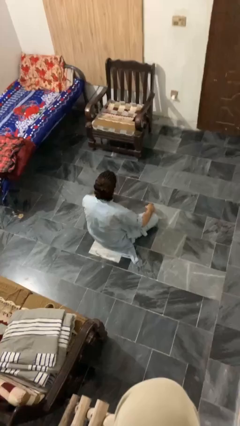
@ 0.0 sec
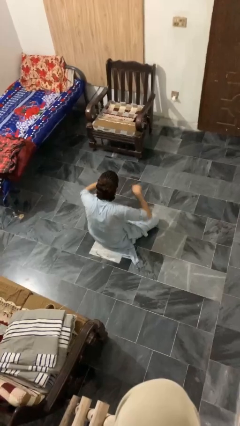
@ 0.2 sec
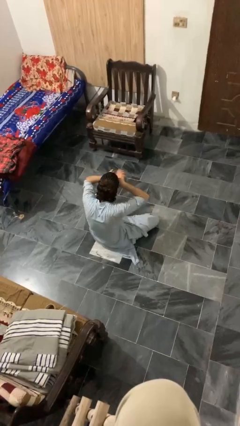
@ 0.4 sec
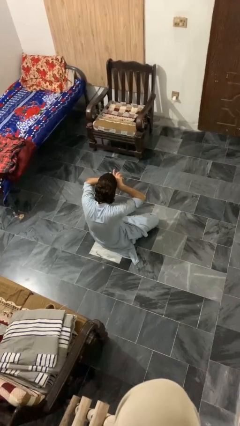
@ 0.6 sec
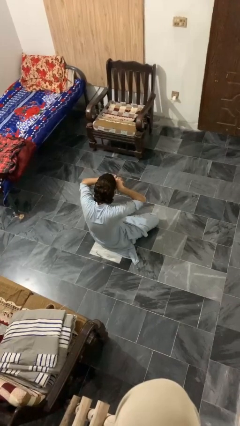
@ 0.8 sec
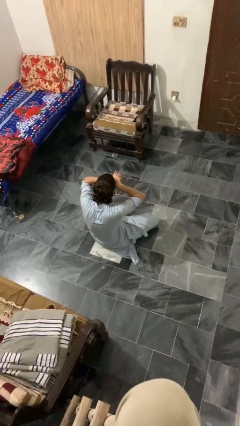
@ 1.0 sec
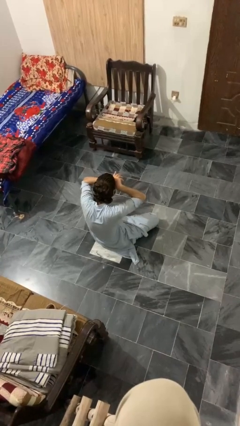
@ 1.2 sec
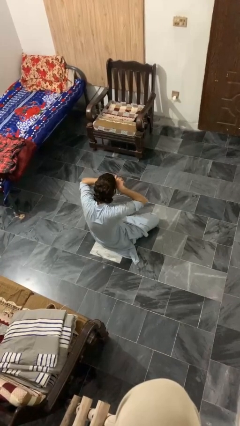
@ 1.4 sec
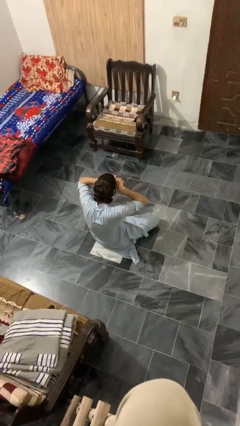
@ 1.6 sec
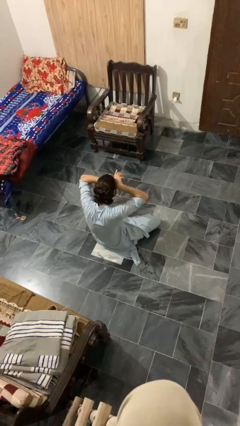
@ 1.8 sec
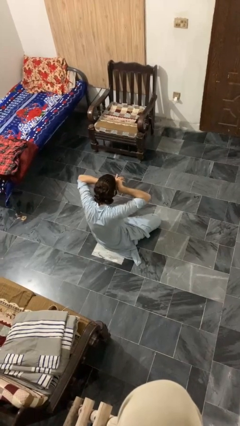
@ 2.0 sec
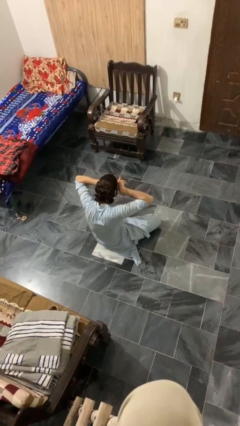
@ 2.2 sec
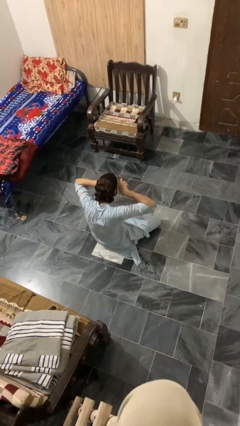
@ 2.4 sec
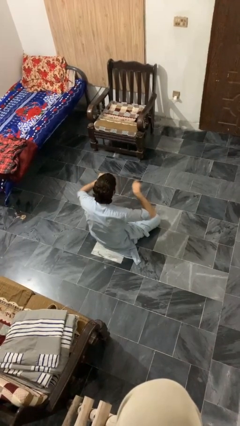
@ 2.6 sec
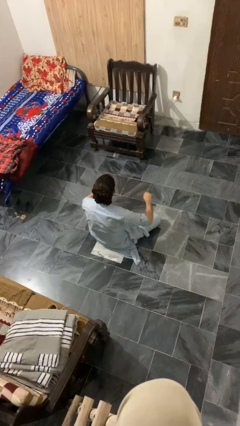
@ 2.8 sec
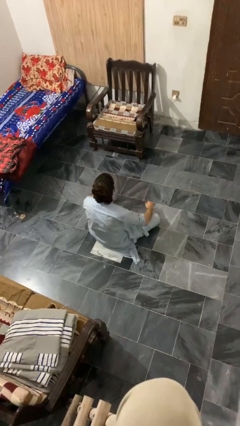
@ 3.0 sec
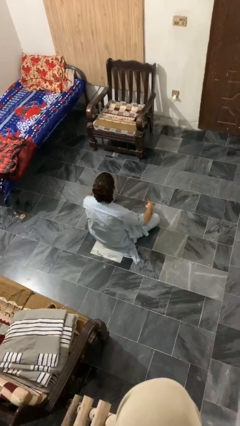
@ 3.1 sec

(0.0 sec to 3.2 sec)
person rubs eyes

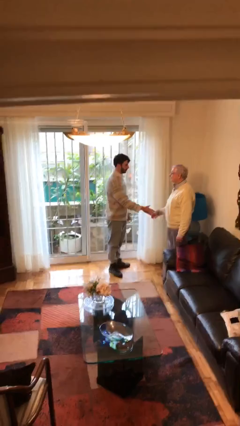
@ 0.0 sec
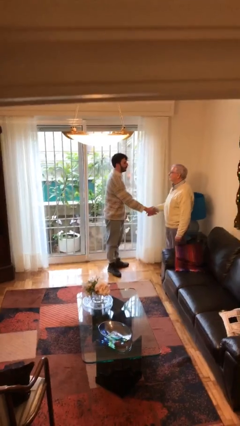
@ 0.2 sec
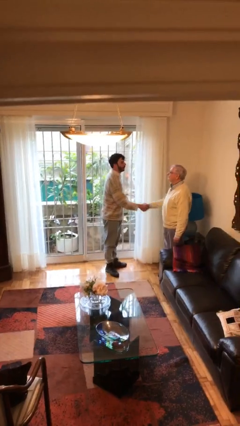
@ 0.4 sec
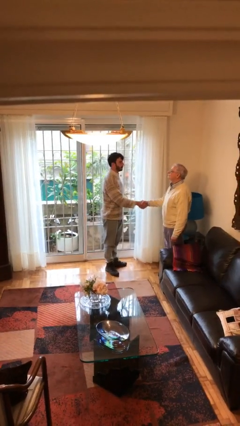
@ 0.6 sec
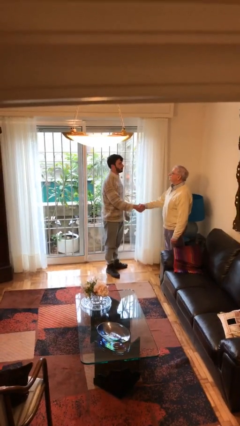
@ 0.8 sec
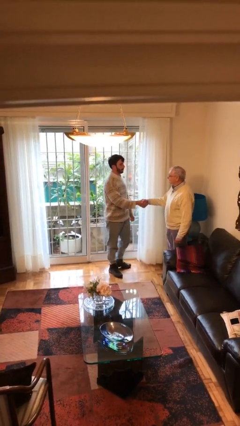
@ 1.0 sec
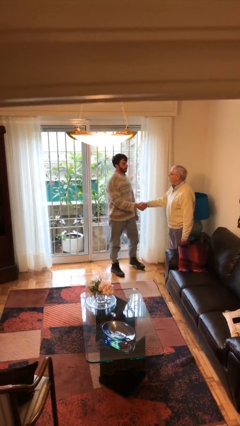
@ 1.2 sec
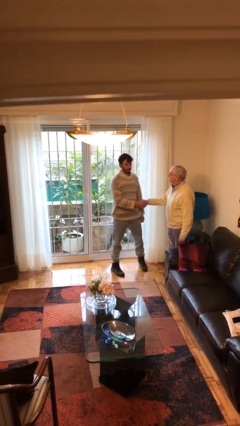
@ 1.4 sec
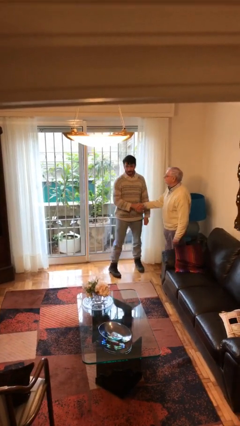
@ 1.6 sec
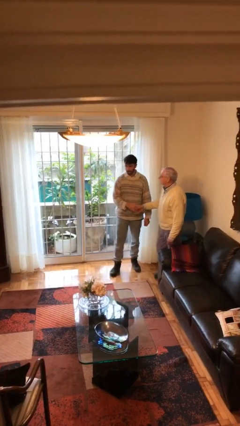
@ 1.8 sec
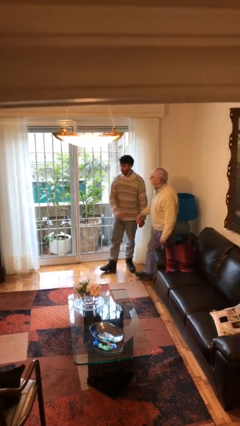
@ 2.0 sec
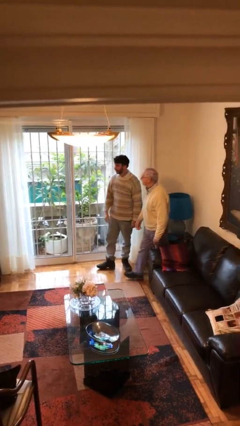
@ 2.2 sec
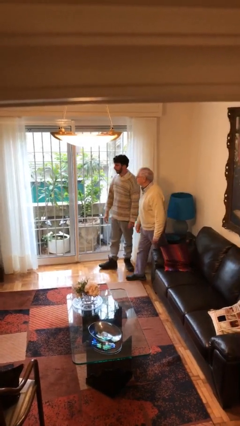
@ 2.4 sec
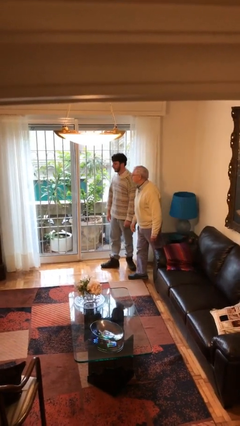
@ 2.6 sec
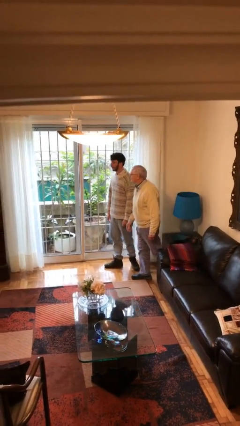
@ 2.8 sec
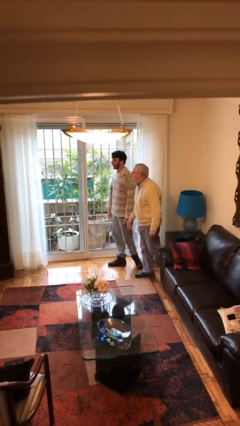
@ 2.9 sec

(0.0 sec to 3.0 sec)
person shakes hand

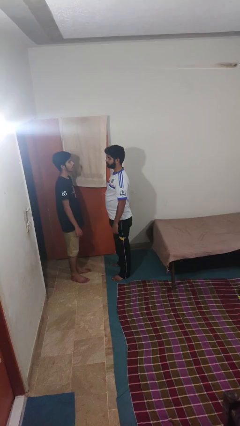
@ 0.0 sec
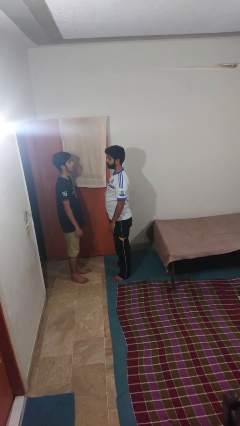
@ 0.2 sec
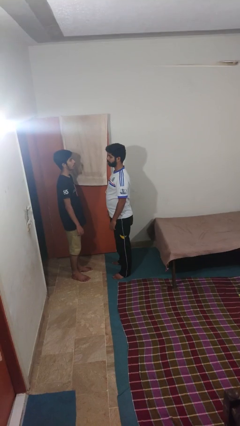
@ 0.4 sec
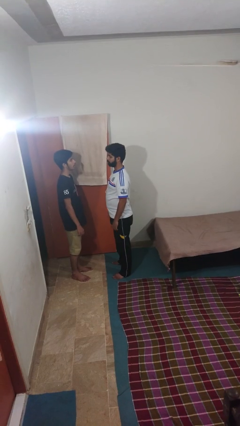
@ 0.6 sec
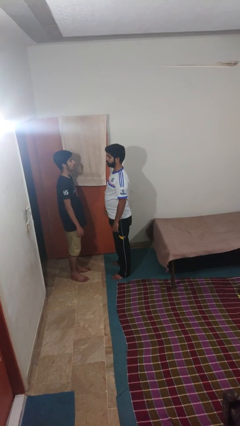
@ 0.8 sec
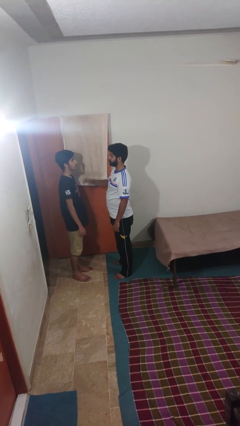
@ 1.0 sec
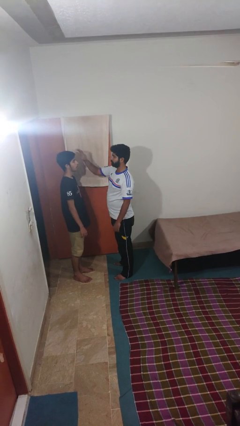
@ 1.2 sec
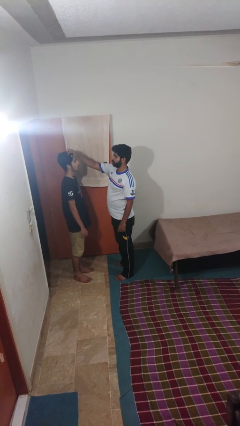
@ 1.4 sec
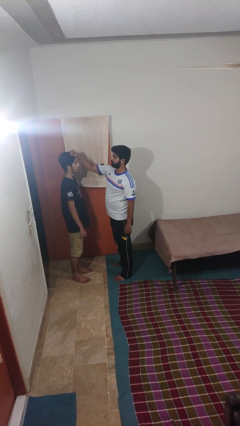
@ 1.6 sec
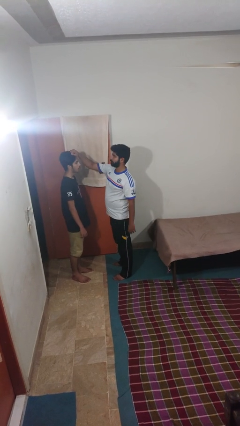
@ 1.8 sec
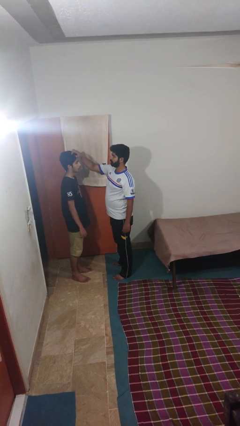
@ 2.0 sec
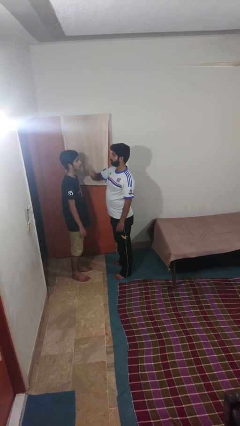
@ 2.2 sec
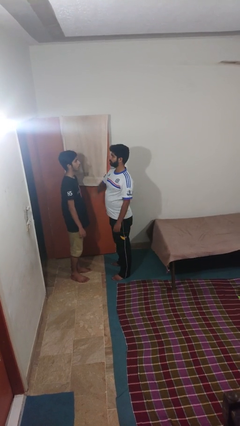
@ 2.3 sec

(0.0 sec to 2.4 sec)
person grabs person by hair

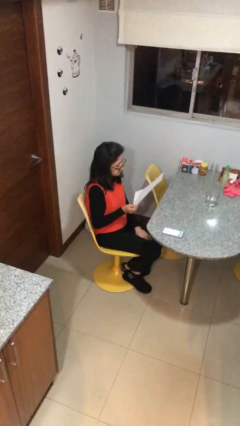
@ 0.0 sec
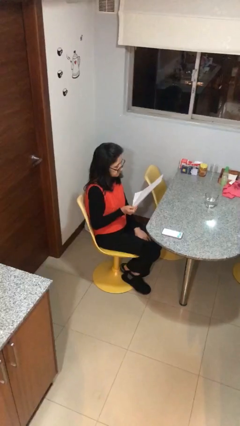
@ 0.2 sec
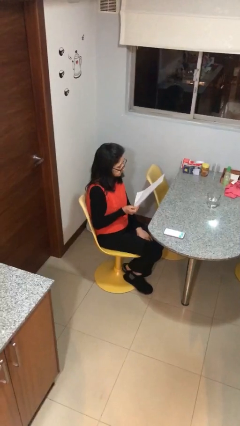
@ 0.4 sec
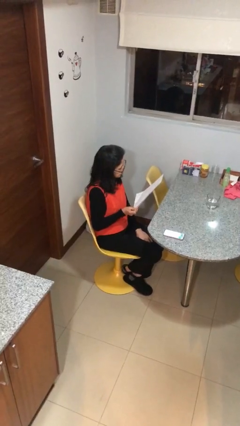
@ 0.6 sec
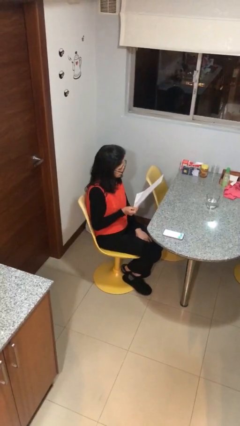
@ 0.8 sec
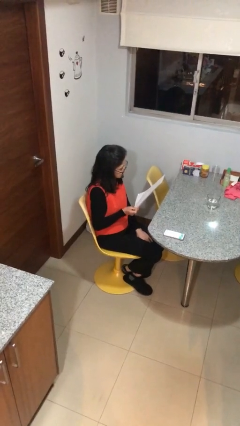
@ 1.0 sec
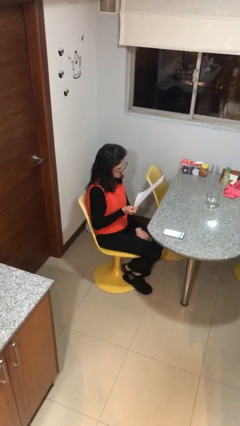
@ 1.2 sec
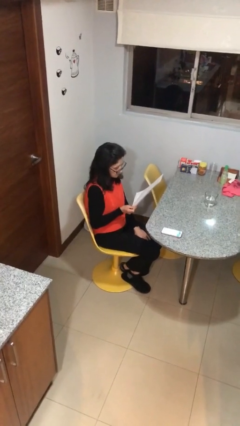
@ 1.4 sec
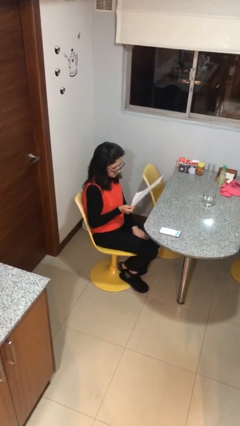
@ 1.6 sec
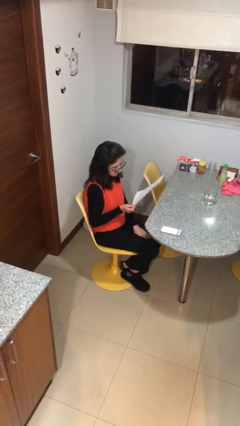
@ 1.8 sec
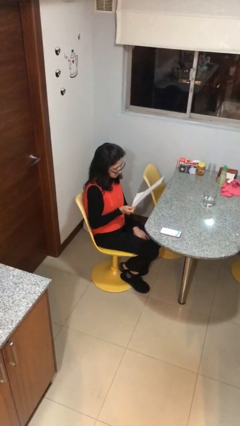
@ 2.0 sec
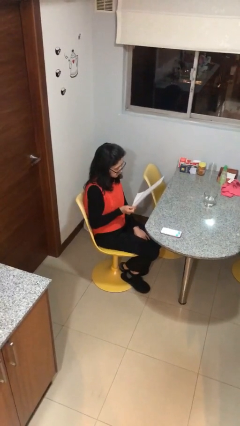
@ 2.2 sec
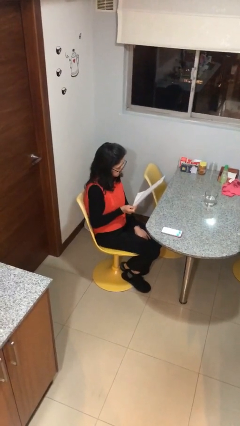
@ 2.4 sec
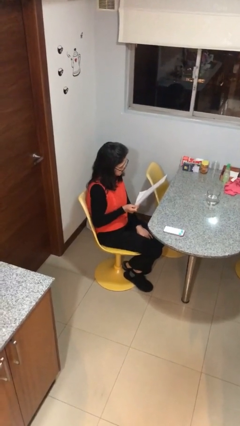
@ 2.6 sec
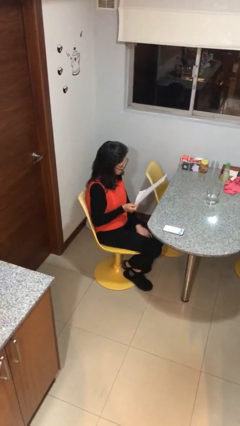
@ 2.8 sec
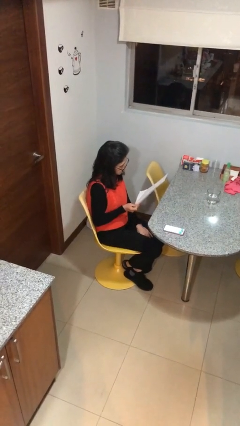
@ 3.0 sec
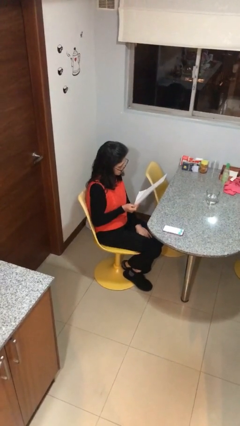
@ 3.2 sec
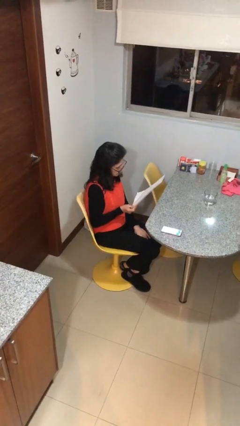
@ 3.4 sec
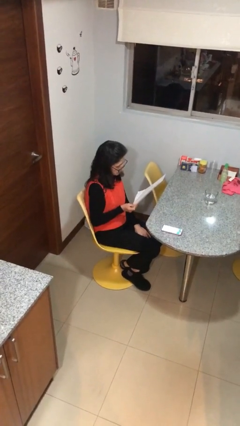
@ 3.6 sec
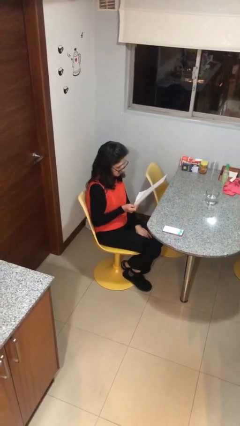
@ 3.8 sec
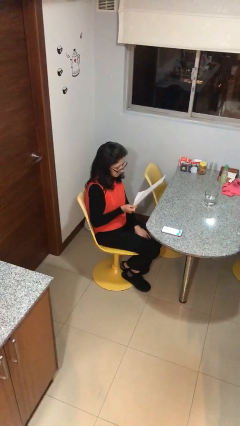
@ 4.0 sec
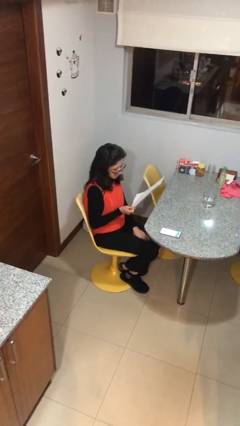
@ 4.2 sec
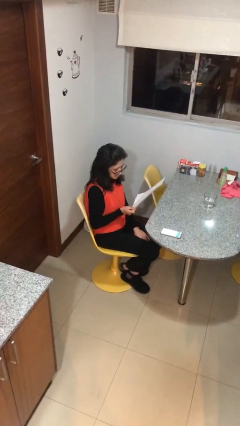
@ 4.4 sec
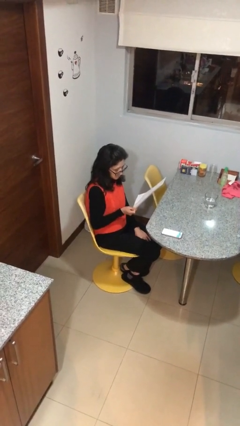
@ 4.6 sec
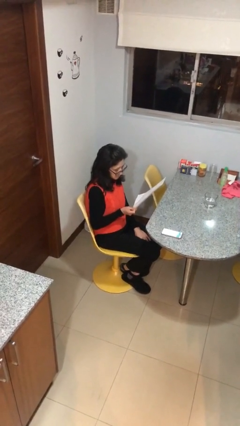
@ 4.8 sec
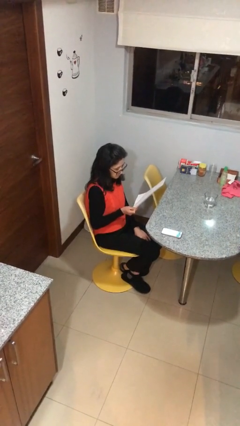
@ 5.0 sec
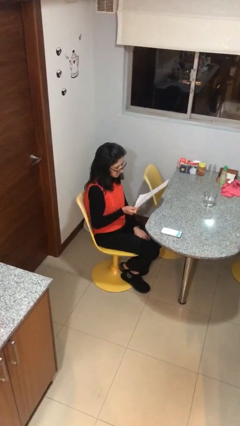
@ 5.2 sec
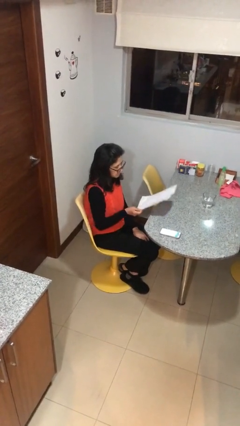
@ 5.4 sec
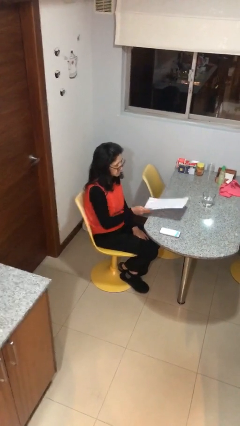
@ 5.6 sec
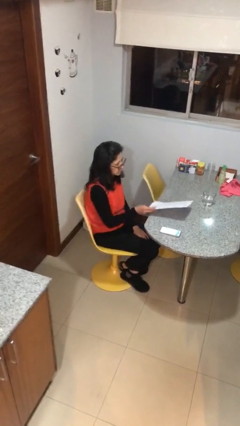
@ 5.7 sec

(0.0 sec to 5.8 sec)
person reads document

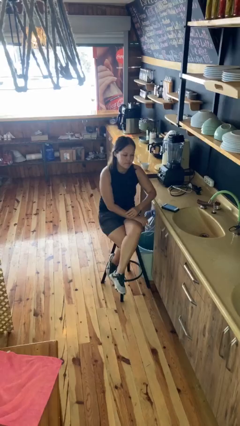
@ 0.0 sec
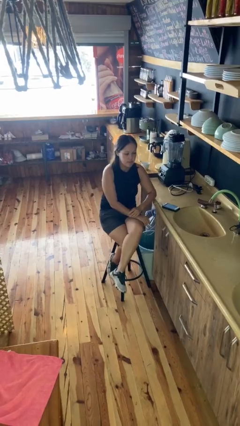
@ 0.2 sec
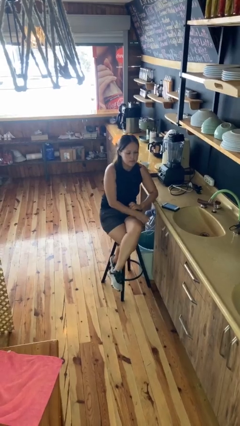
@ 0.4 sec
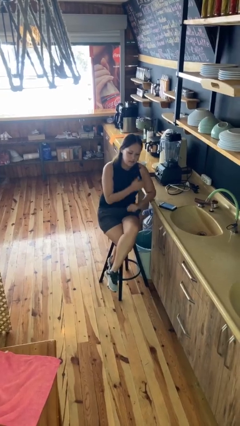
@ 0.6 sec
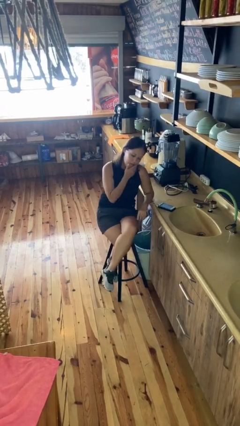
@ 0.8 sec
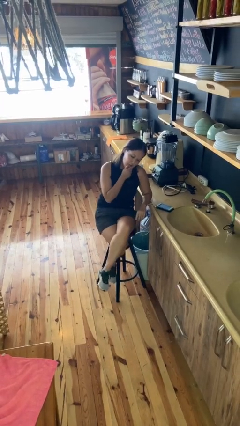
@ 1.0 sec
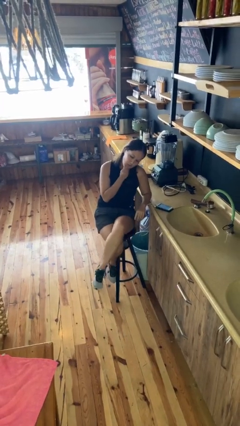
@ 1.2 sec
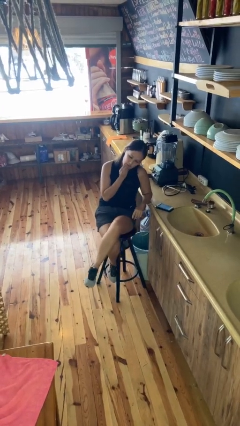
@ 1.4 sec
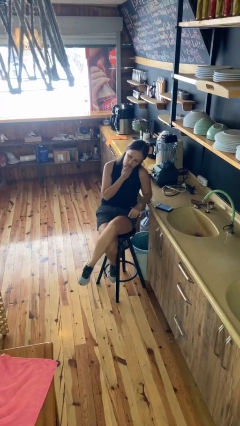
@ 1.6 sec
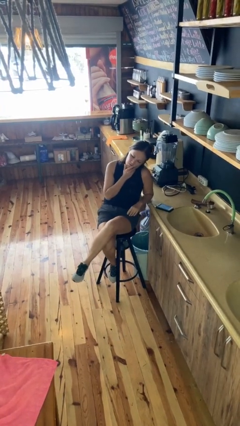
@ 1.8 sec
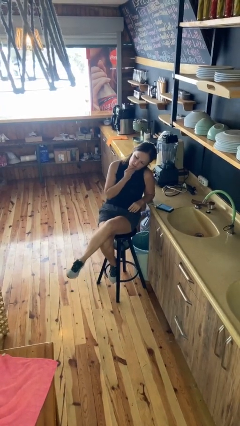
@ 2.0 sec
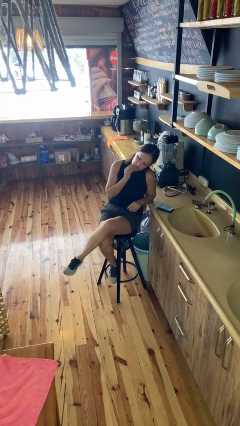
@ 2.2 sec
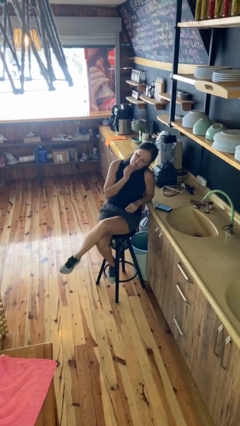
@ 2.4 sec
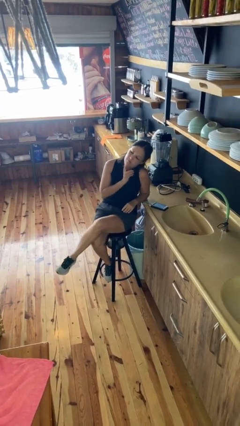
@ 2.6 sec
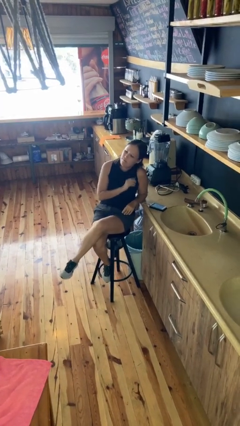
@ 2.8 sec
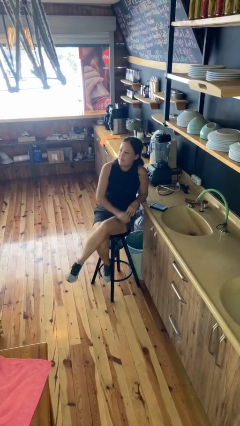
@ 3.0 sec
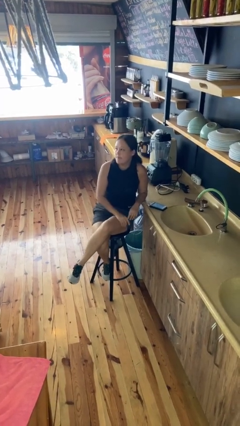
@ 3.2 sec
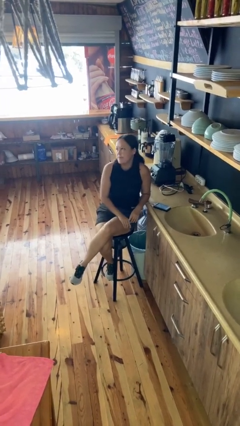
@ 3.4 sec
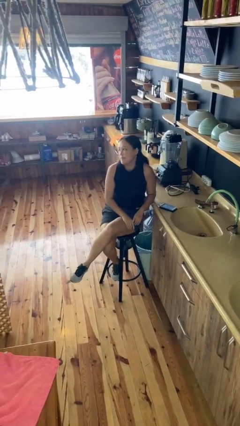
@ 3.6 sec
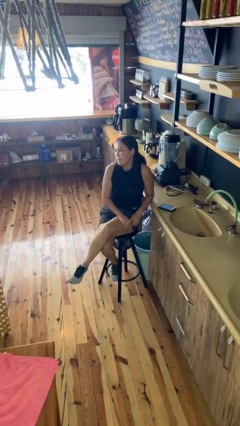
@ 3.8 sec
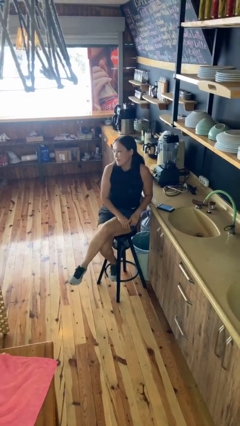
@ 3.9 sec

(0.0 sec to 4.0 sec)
person strokes chin
